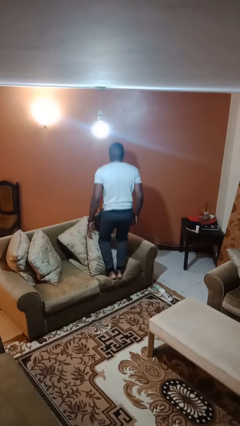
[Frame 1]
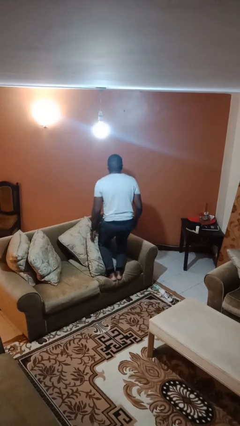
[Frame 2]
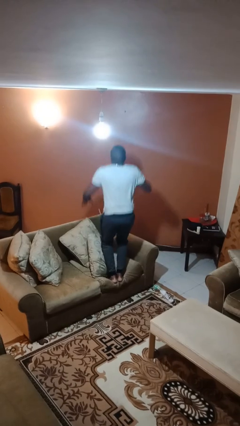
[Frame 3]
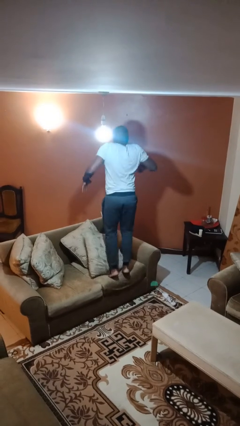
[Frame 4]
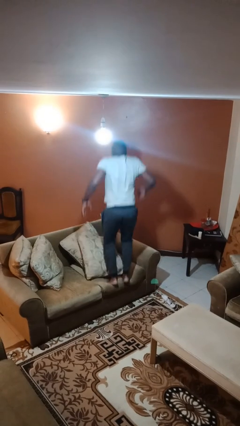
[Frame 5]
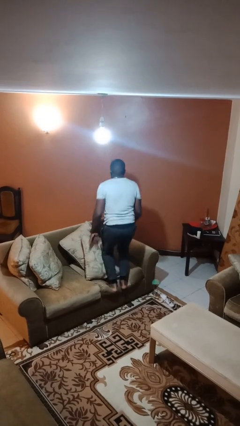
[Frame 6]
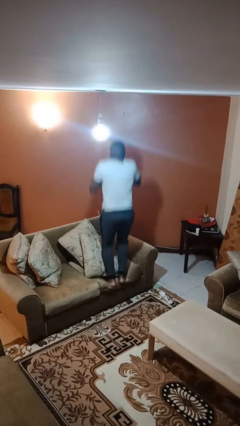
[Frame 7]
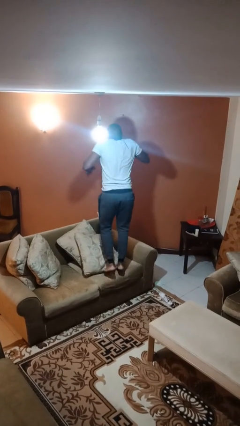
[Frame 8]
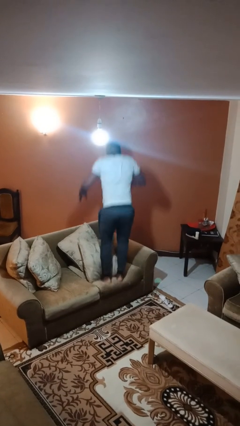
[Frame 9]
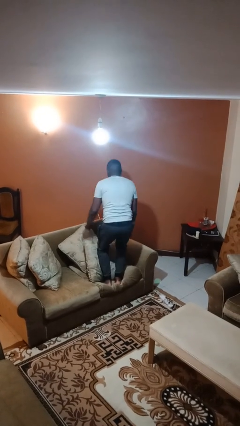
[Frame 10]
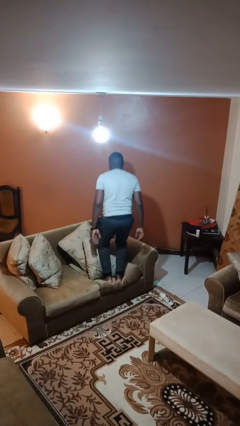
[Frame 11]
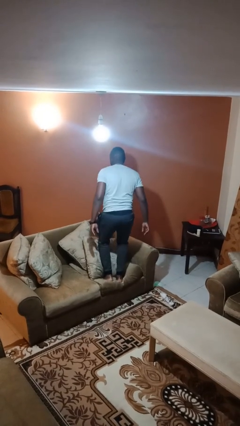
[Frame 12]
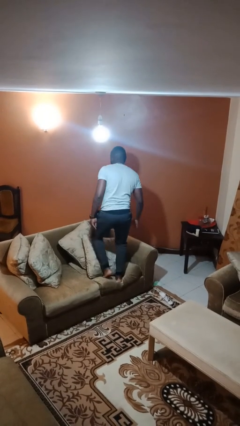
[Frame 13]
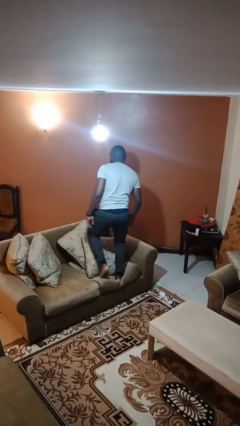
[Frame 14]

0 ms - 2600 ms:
person jumps on couch

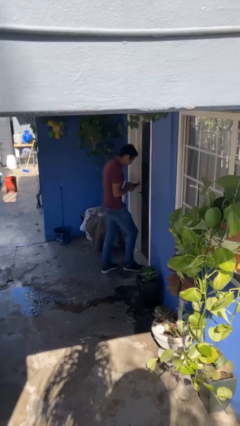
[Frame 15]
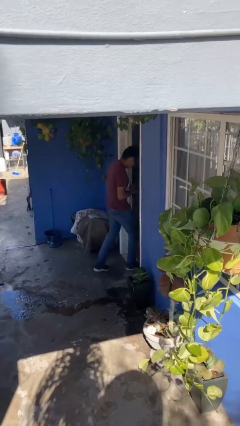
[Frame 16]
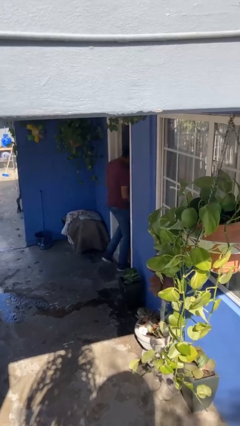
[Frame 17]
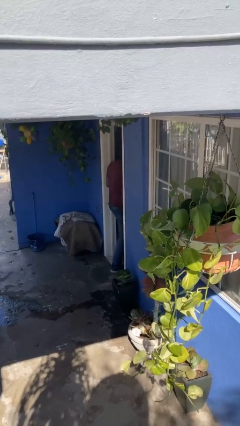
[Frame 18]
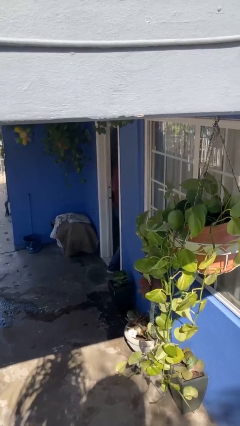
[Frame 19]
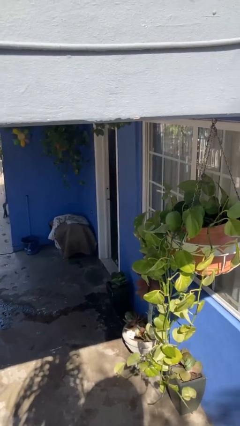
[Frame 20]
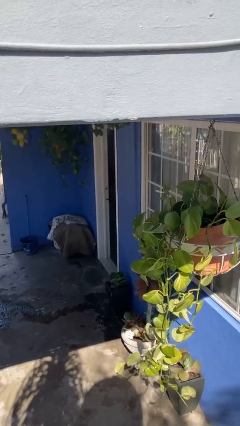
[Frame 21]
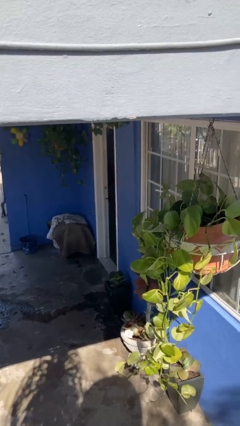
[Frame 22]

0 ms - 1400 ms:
person exits scene through structure

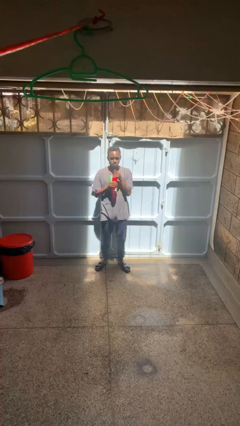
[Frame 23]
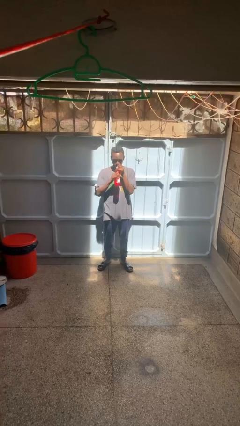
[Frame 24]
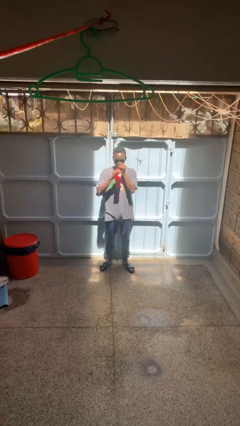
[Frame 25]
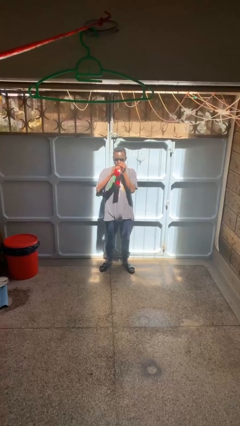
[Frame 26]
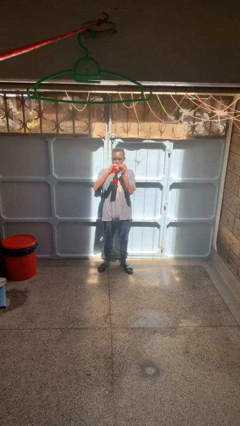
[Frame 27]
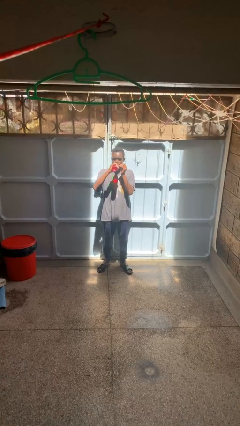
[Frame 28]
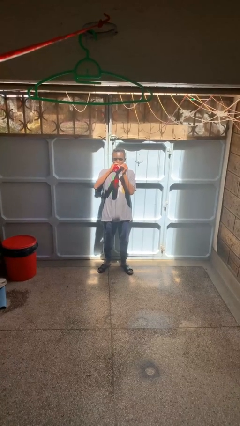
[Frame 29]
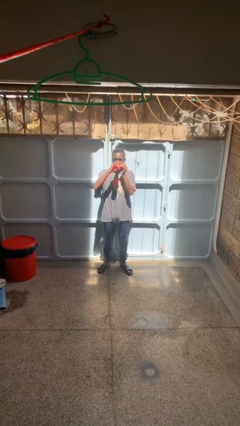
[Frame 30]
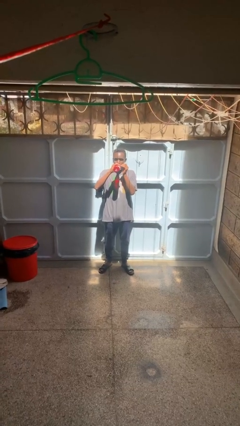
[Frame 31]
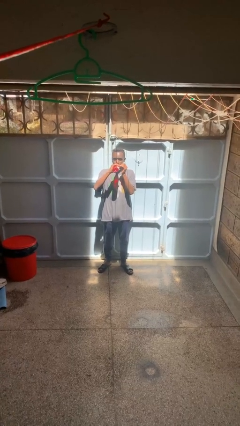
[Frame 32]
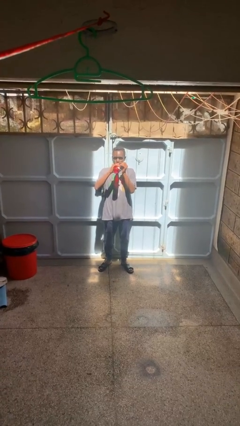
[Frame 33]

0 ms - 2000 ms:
person drinks from beverage can

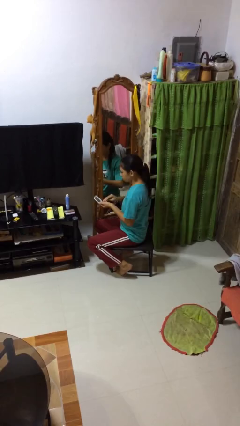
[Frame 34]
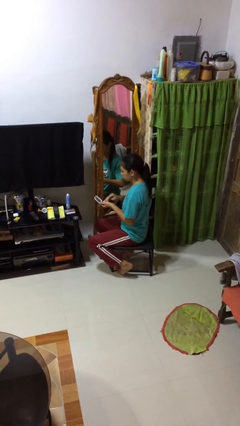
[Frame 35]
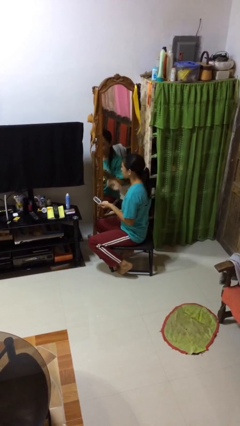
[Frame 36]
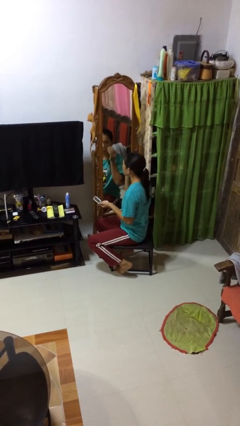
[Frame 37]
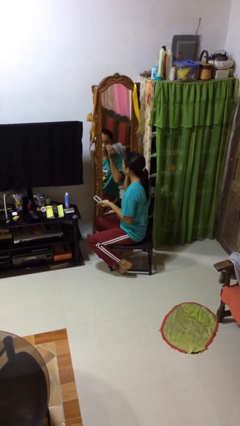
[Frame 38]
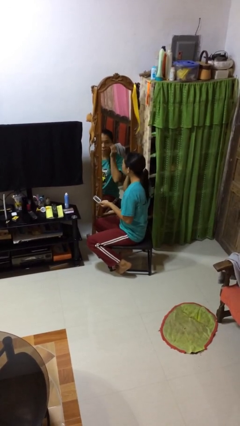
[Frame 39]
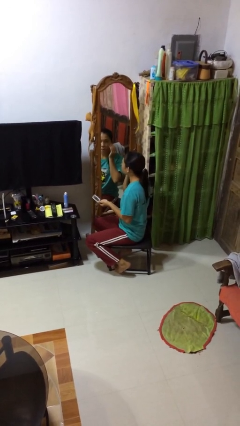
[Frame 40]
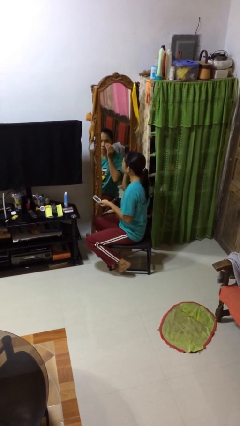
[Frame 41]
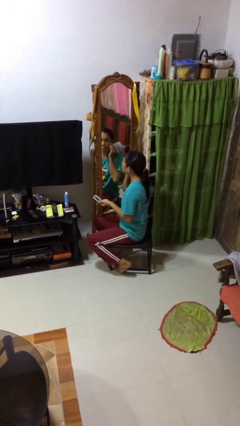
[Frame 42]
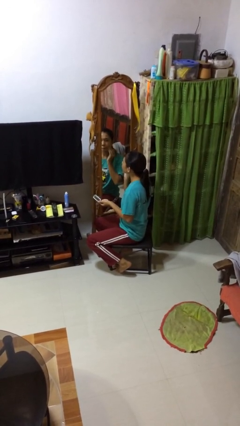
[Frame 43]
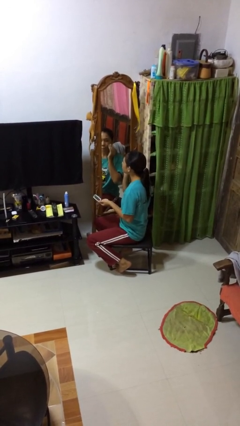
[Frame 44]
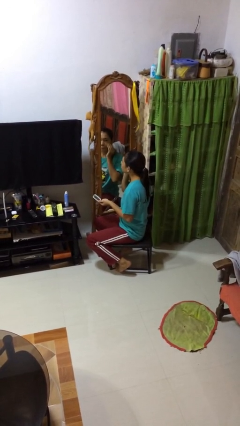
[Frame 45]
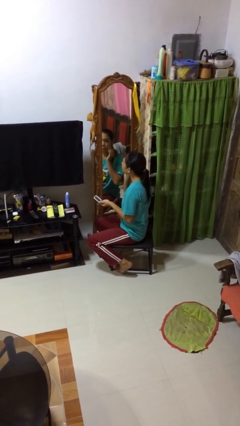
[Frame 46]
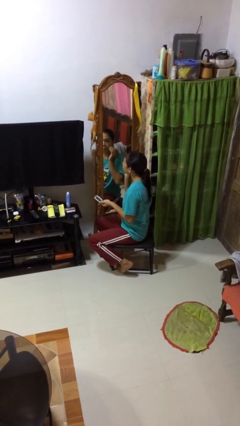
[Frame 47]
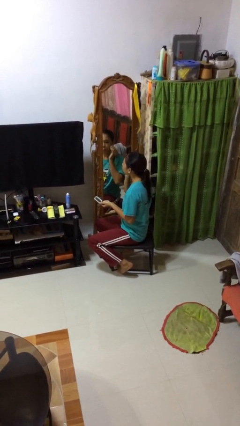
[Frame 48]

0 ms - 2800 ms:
person applies foundation makeup

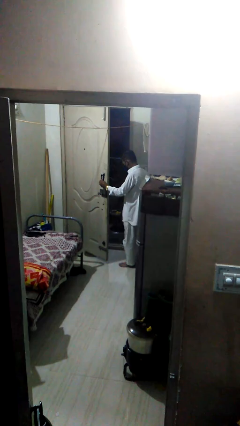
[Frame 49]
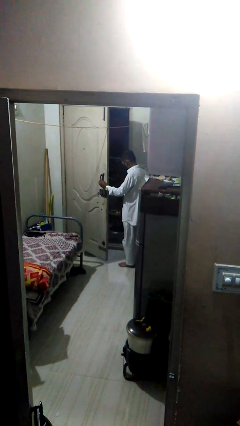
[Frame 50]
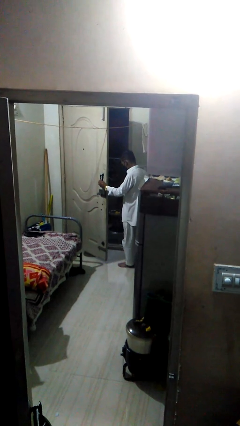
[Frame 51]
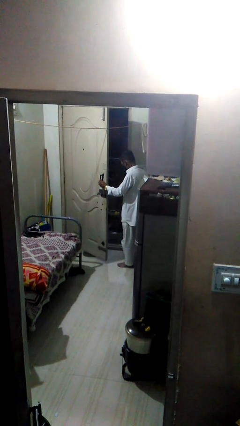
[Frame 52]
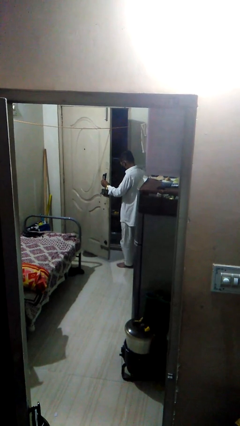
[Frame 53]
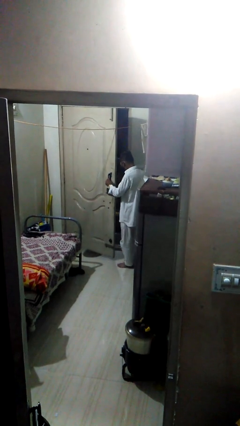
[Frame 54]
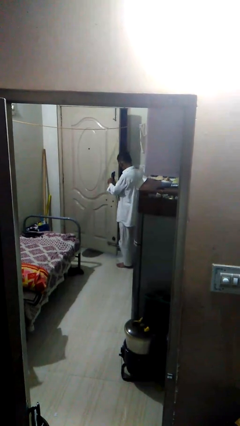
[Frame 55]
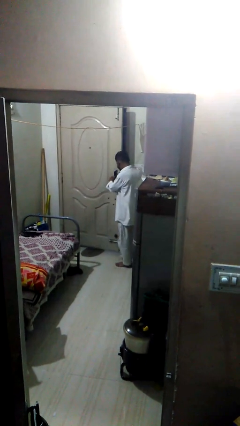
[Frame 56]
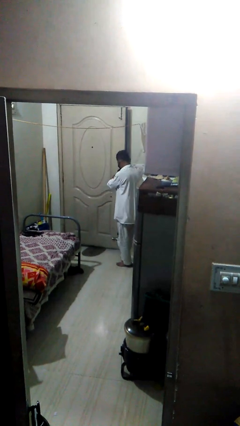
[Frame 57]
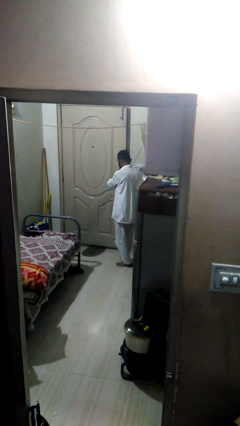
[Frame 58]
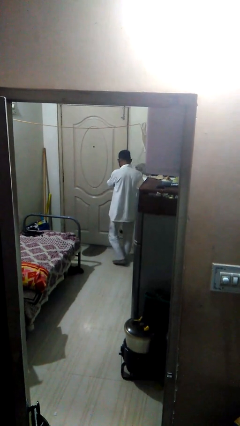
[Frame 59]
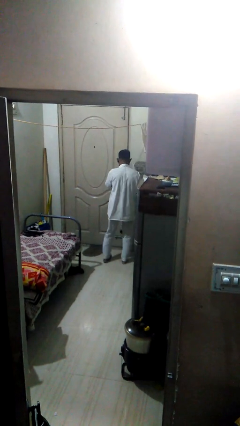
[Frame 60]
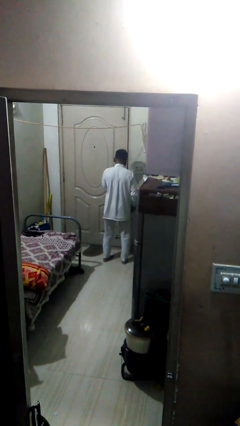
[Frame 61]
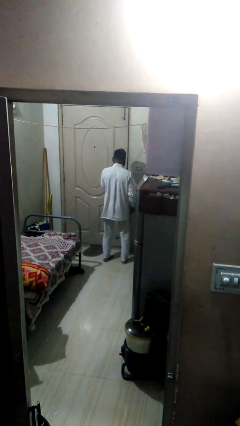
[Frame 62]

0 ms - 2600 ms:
person closes facility door

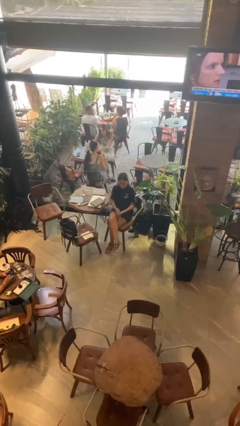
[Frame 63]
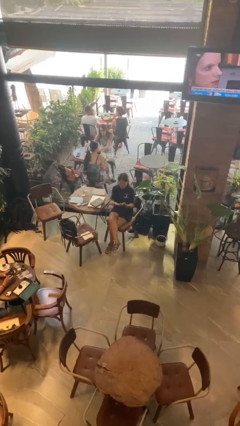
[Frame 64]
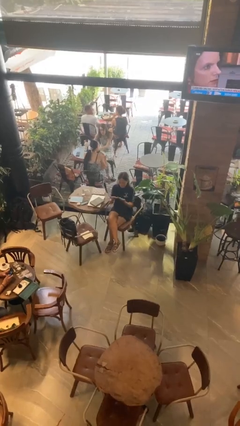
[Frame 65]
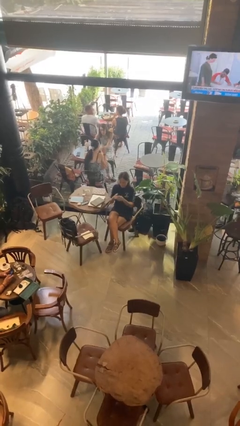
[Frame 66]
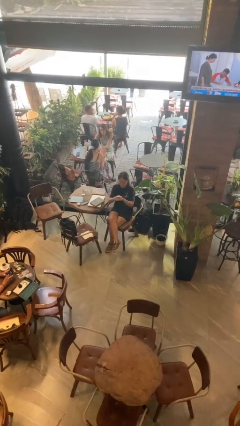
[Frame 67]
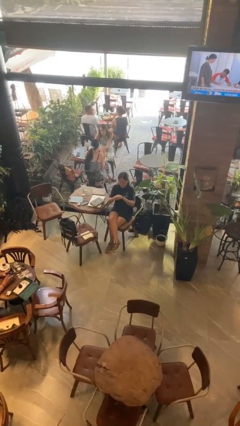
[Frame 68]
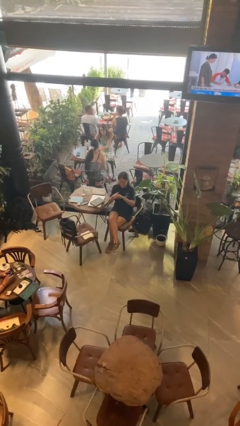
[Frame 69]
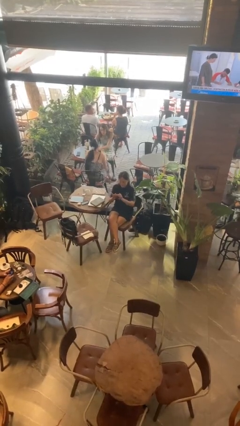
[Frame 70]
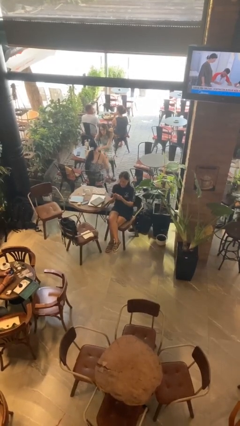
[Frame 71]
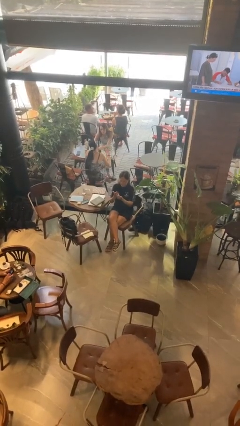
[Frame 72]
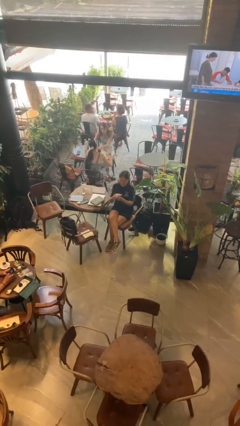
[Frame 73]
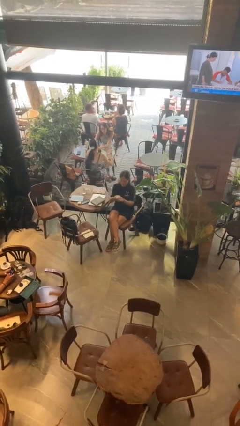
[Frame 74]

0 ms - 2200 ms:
person looks at hands in lap

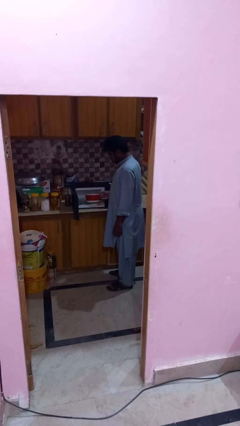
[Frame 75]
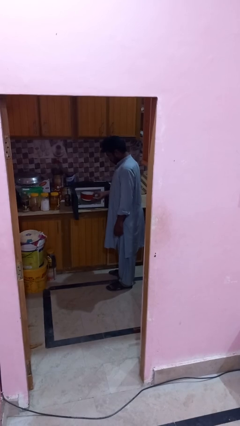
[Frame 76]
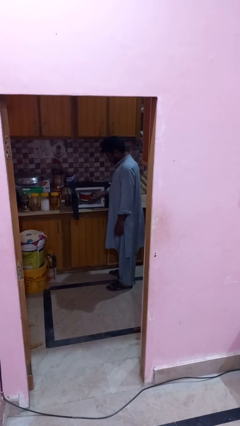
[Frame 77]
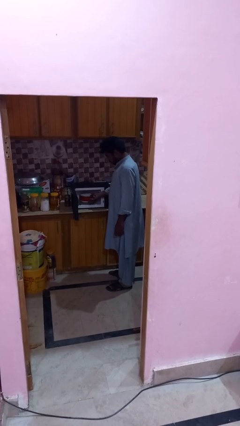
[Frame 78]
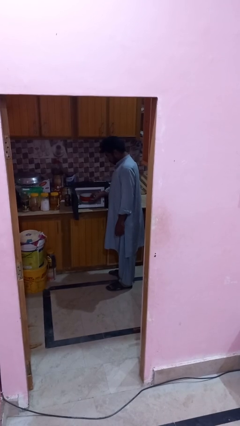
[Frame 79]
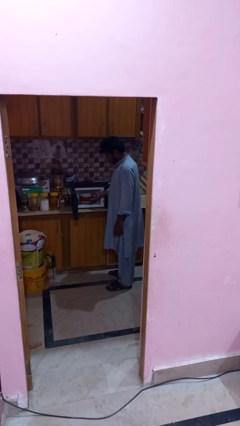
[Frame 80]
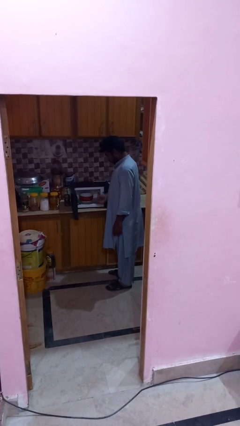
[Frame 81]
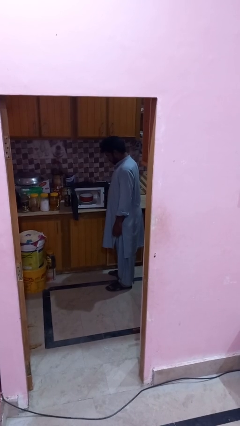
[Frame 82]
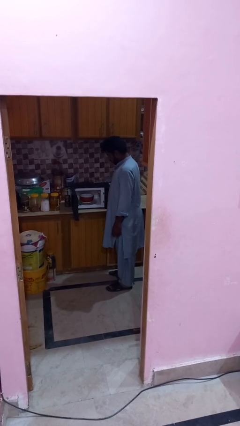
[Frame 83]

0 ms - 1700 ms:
person puts object into microwave

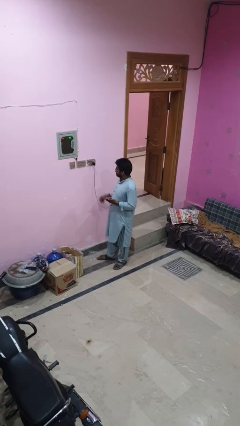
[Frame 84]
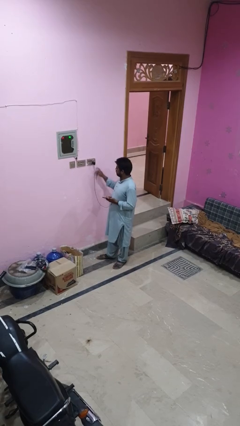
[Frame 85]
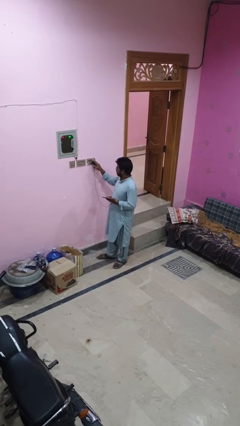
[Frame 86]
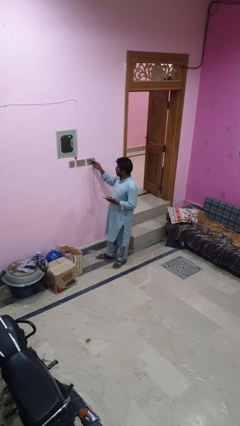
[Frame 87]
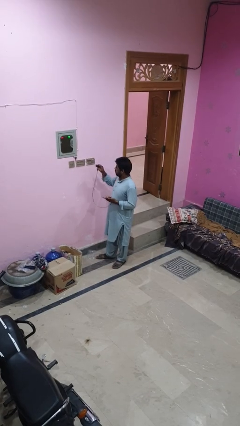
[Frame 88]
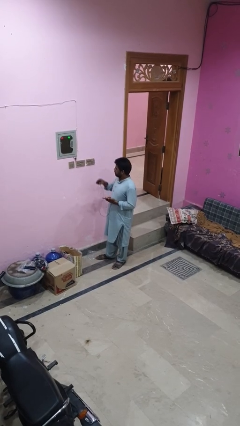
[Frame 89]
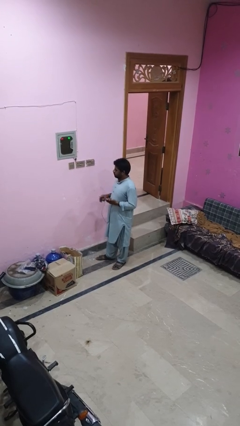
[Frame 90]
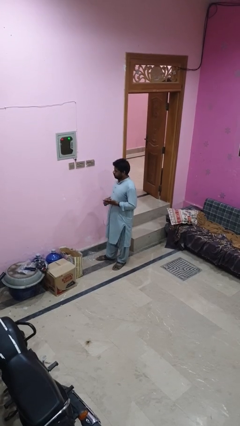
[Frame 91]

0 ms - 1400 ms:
person unplugs from electrical socket
